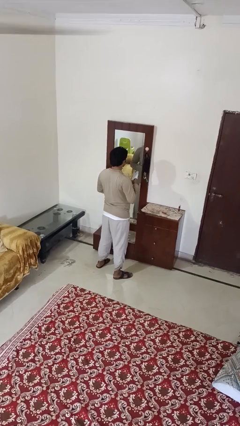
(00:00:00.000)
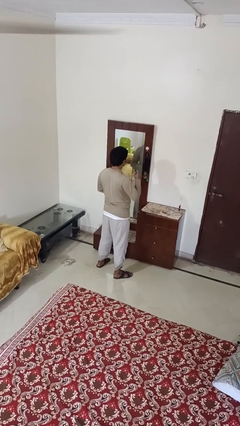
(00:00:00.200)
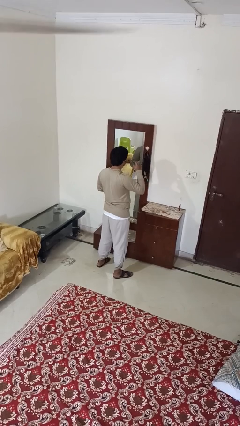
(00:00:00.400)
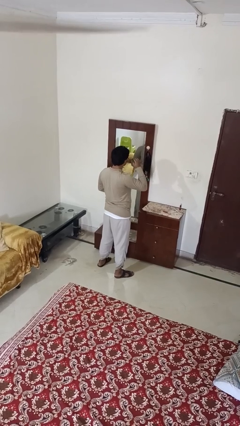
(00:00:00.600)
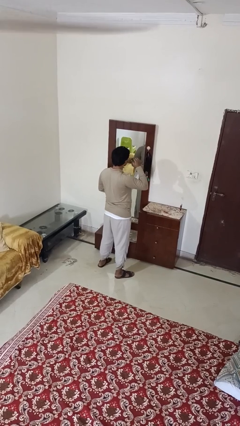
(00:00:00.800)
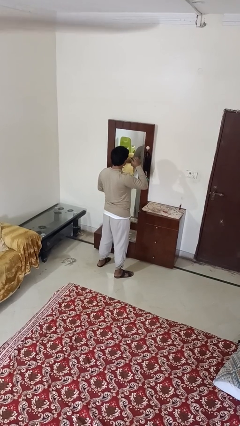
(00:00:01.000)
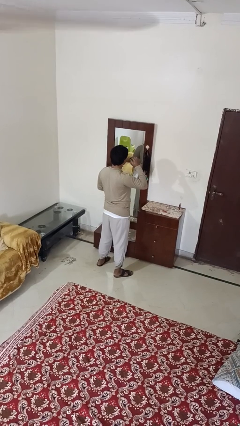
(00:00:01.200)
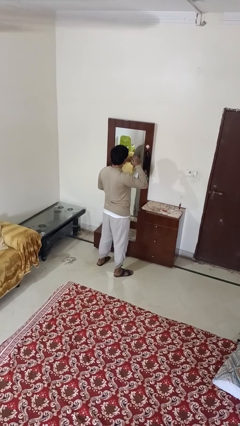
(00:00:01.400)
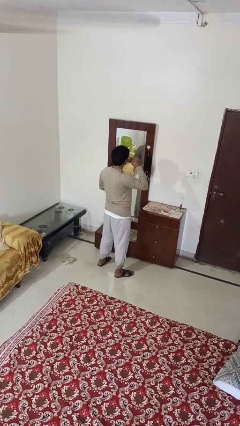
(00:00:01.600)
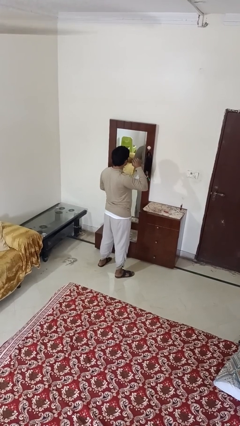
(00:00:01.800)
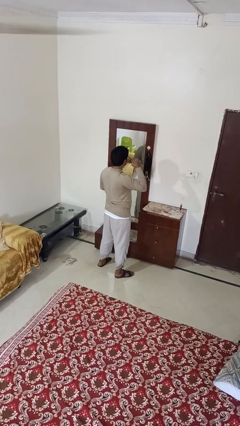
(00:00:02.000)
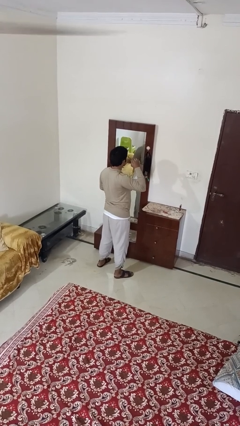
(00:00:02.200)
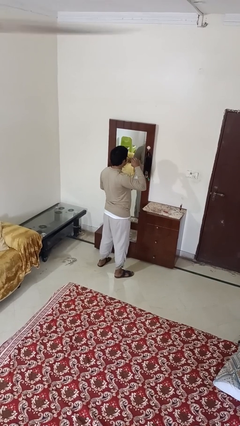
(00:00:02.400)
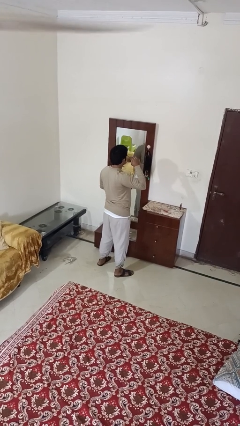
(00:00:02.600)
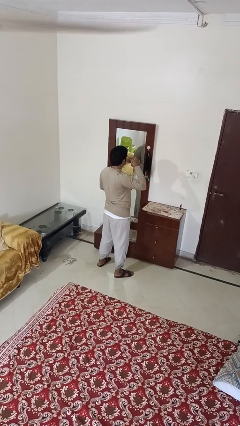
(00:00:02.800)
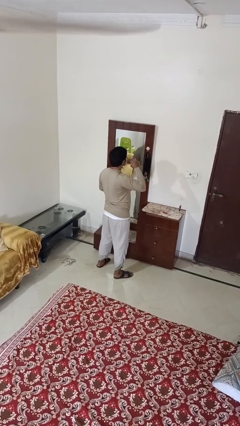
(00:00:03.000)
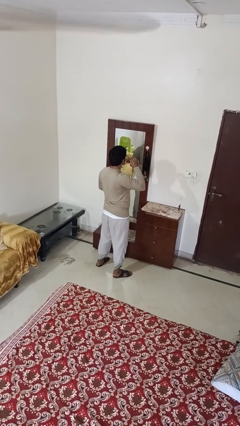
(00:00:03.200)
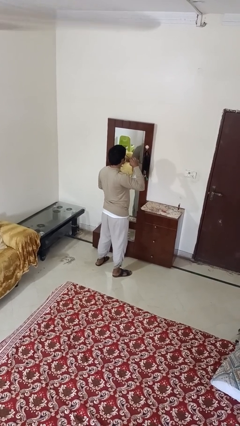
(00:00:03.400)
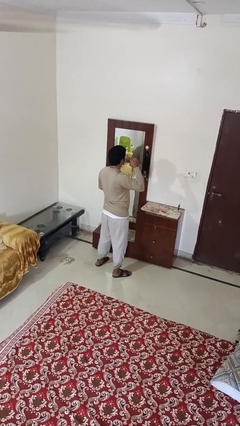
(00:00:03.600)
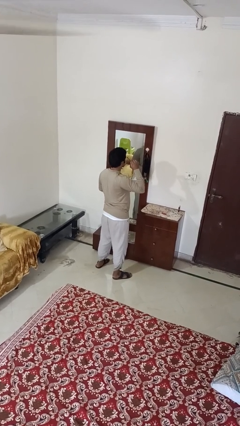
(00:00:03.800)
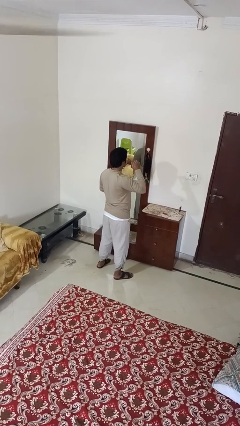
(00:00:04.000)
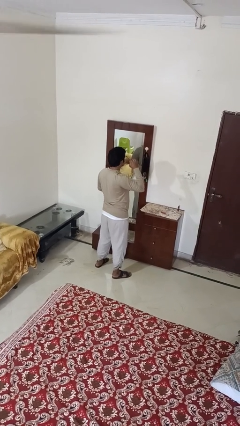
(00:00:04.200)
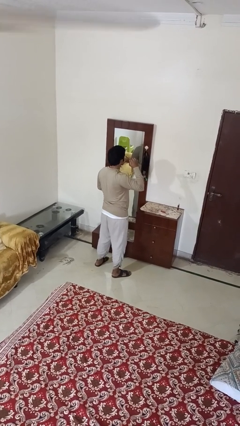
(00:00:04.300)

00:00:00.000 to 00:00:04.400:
person applies eye makeup

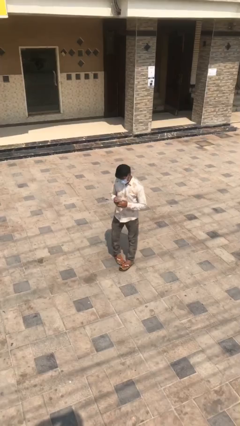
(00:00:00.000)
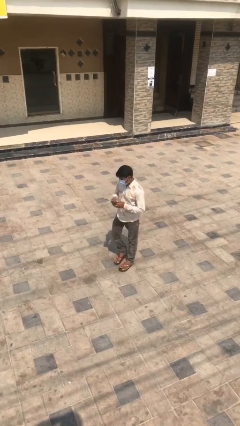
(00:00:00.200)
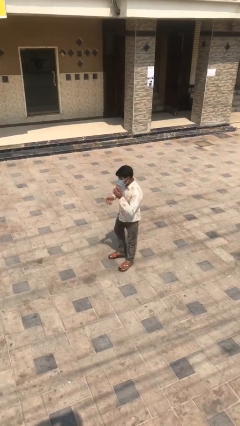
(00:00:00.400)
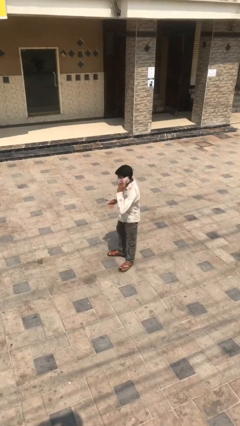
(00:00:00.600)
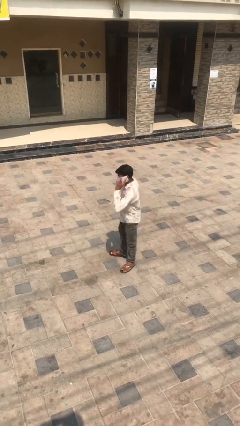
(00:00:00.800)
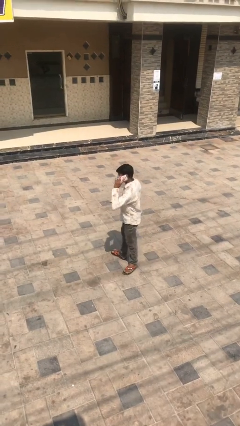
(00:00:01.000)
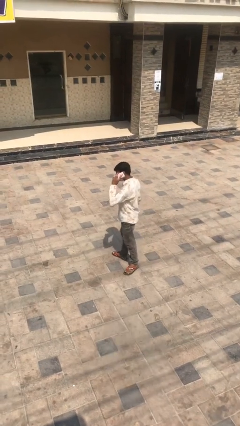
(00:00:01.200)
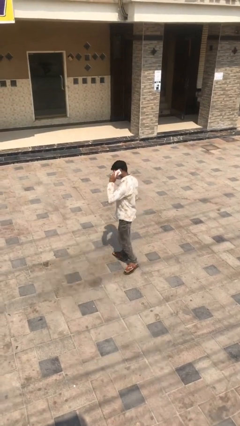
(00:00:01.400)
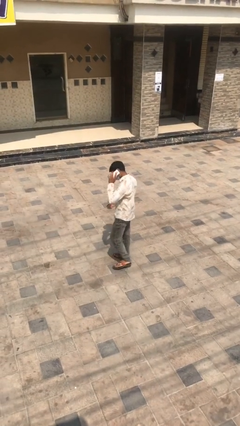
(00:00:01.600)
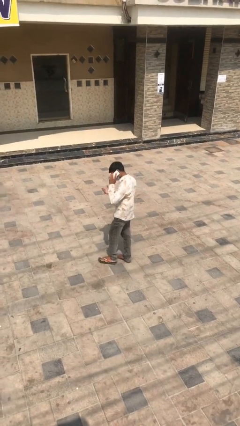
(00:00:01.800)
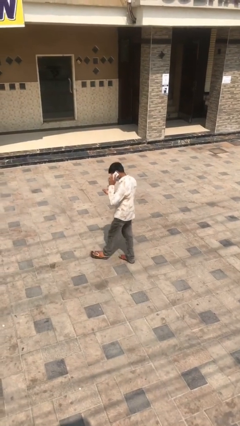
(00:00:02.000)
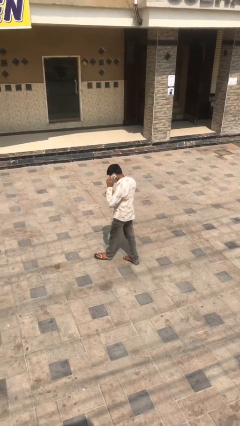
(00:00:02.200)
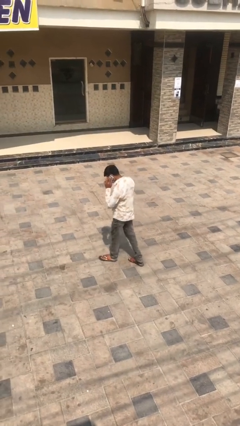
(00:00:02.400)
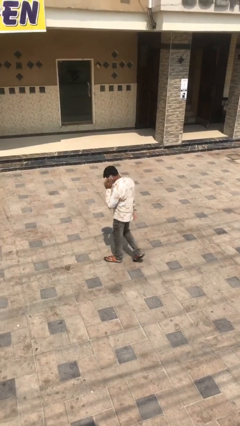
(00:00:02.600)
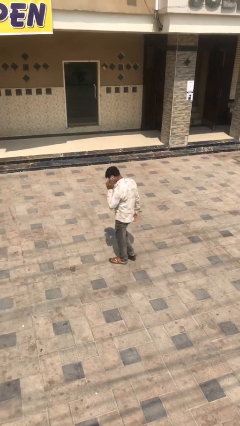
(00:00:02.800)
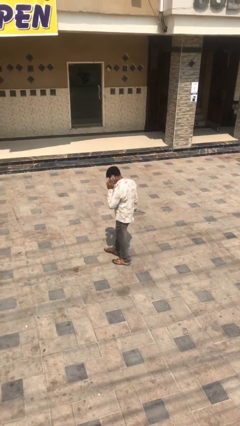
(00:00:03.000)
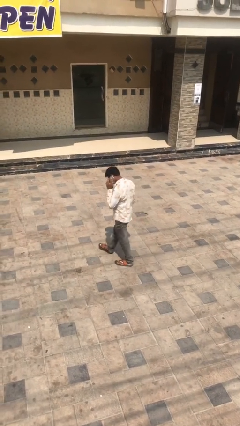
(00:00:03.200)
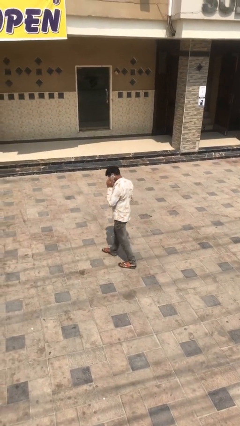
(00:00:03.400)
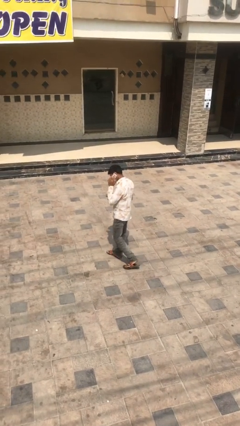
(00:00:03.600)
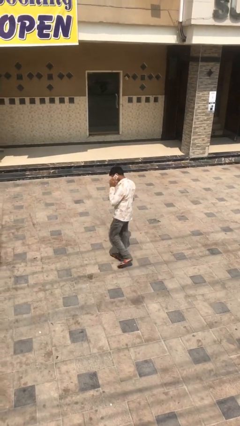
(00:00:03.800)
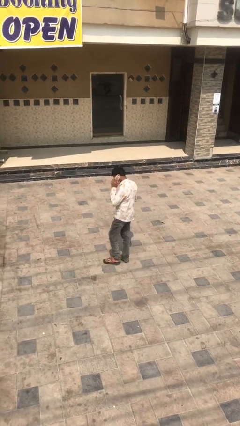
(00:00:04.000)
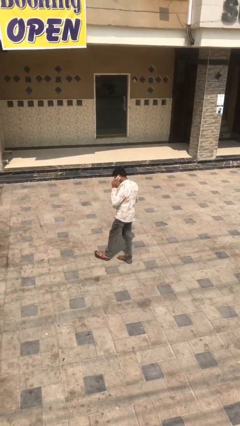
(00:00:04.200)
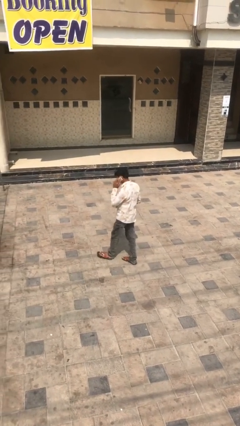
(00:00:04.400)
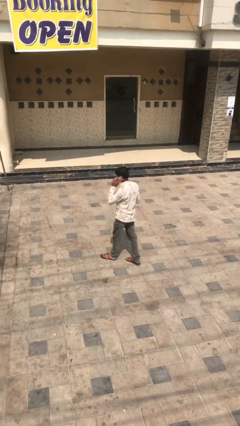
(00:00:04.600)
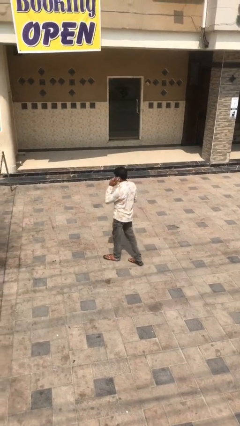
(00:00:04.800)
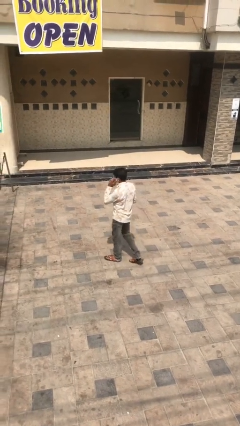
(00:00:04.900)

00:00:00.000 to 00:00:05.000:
person talks on phone

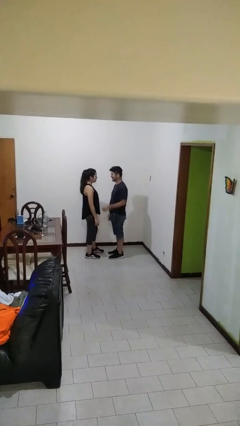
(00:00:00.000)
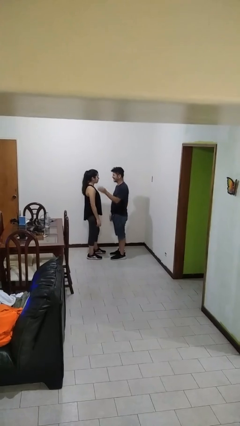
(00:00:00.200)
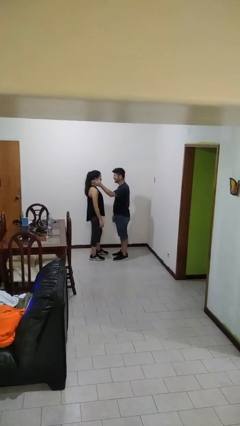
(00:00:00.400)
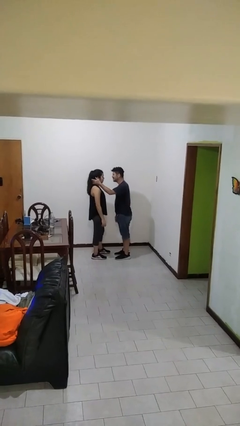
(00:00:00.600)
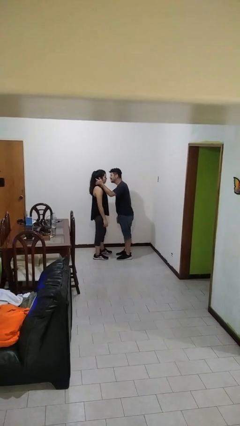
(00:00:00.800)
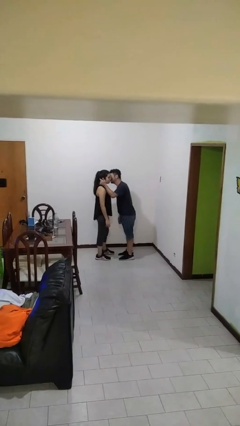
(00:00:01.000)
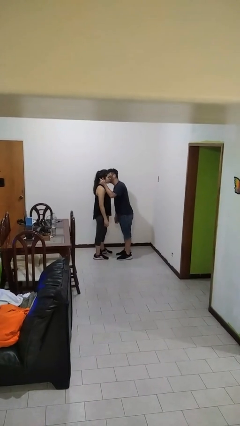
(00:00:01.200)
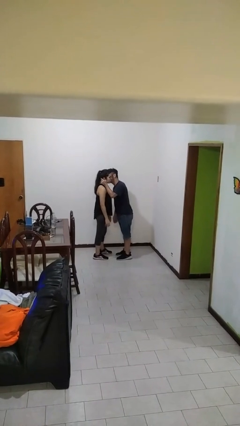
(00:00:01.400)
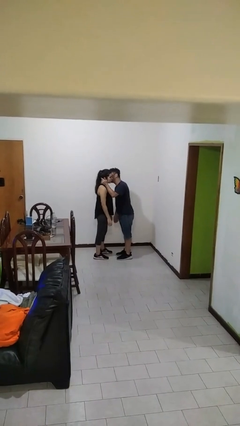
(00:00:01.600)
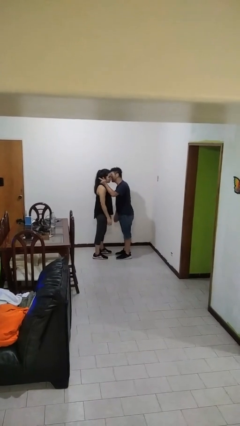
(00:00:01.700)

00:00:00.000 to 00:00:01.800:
person kisses cheek of person

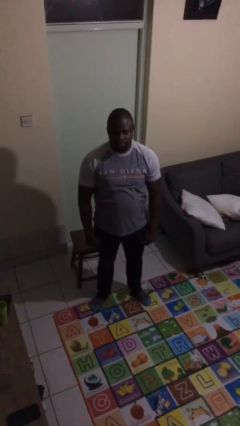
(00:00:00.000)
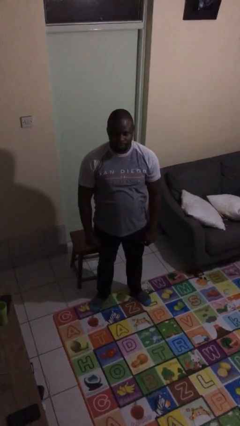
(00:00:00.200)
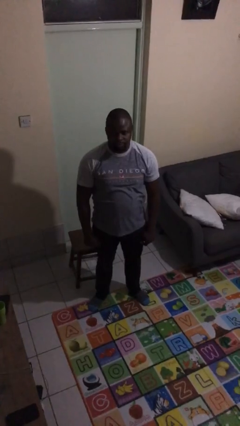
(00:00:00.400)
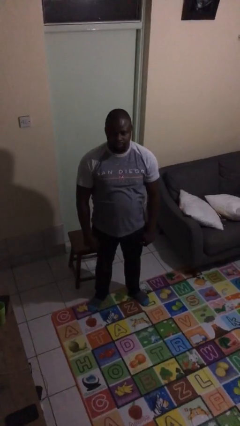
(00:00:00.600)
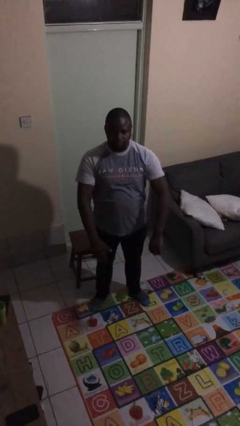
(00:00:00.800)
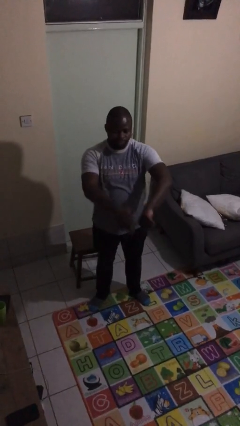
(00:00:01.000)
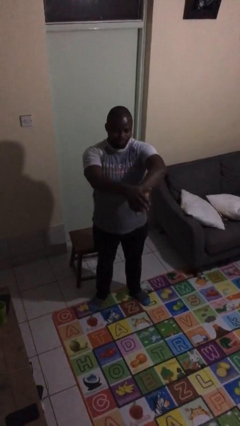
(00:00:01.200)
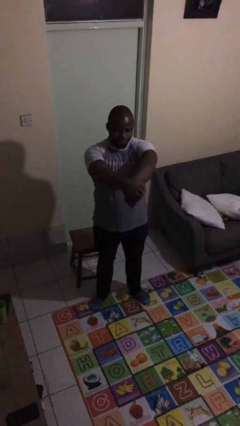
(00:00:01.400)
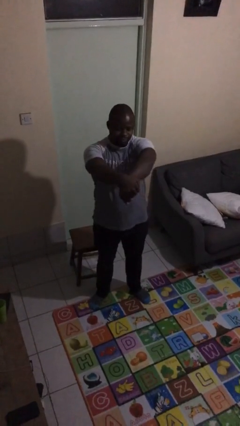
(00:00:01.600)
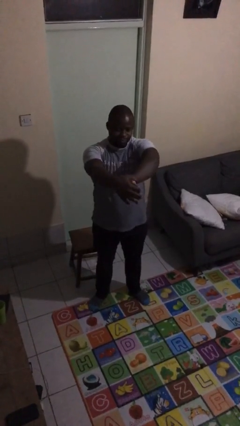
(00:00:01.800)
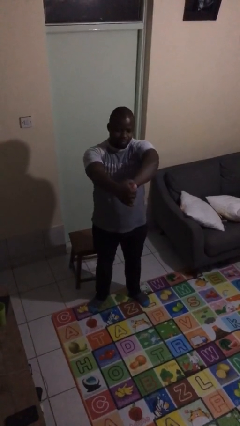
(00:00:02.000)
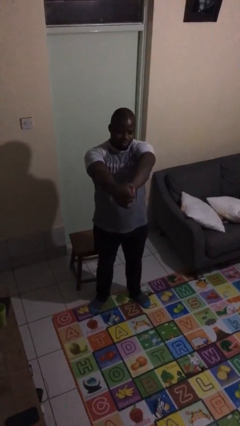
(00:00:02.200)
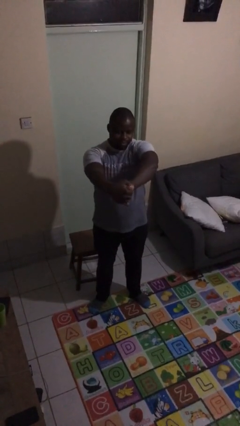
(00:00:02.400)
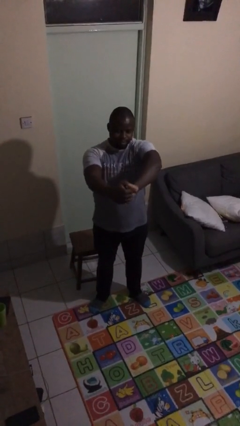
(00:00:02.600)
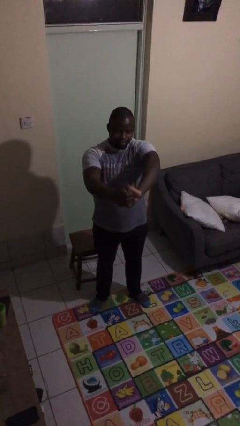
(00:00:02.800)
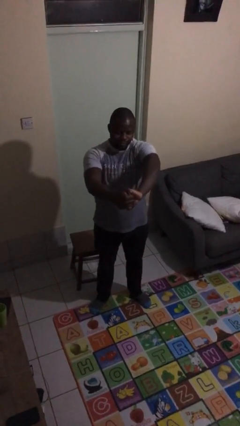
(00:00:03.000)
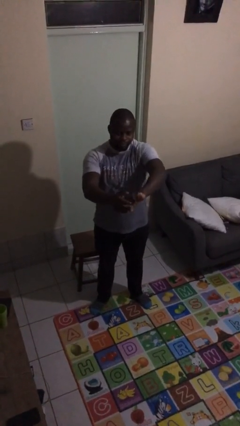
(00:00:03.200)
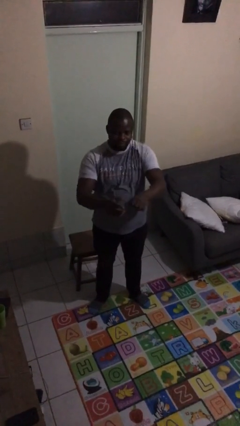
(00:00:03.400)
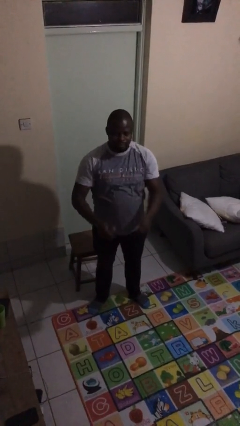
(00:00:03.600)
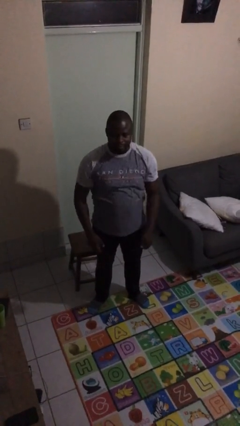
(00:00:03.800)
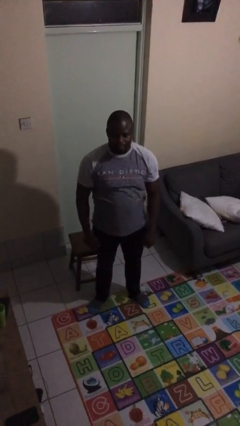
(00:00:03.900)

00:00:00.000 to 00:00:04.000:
person cracks knuckles

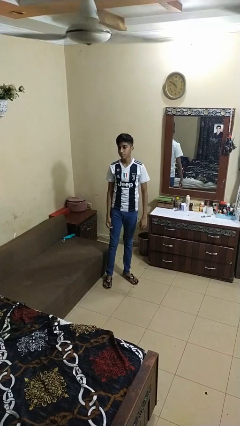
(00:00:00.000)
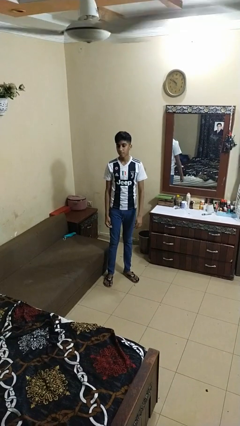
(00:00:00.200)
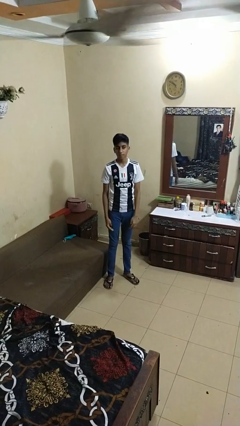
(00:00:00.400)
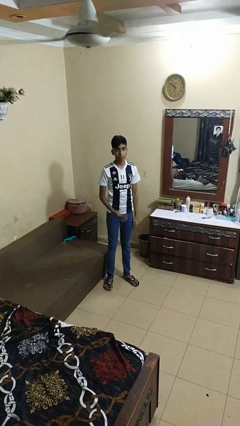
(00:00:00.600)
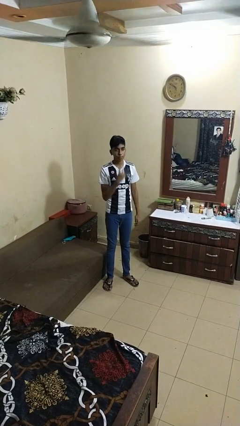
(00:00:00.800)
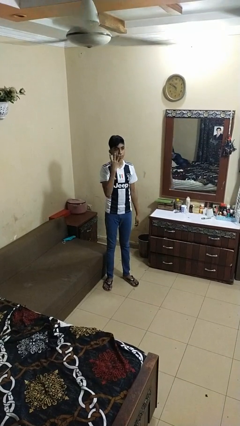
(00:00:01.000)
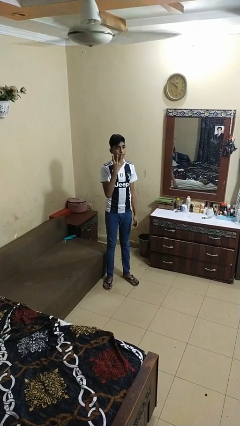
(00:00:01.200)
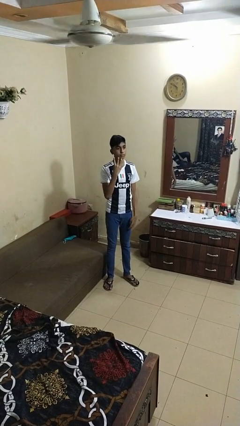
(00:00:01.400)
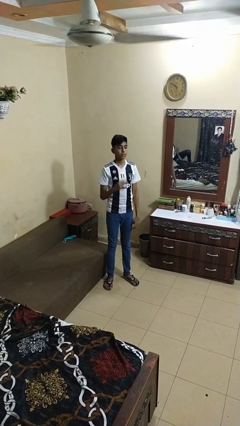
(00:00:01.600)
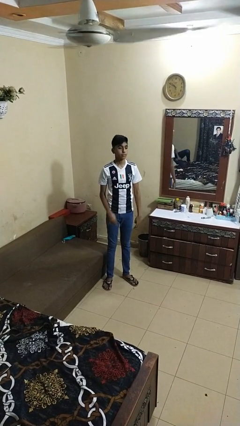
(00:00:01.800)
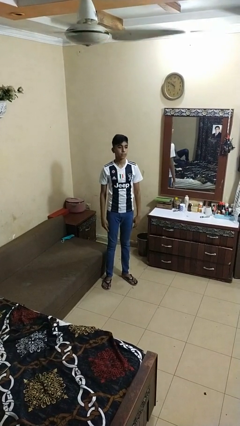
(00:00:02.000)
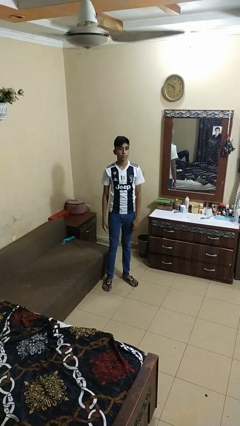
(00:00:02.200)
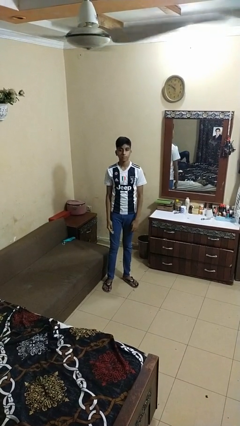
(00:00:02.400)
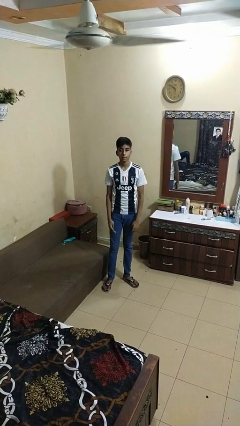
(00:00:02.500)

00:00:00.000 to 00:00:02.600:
person gestures number four
